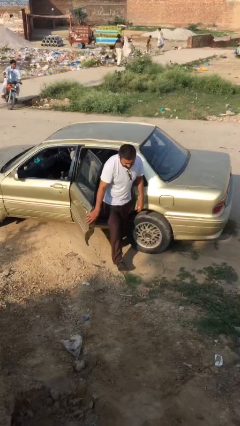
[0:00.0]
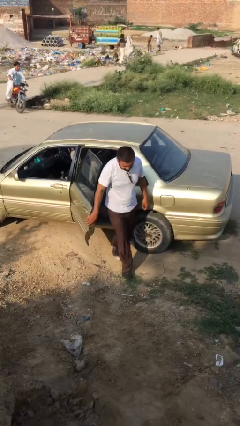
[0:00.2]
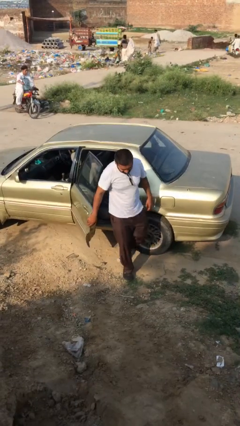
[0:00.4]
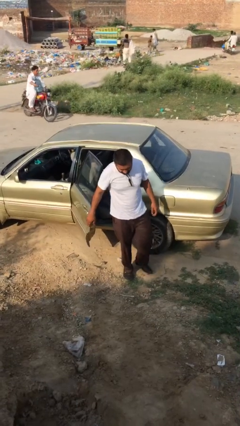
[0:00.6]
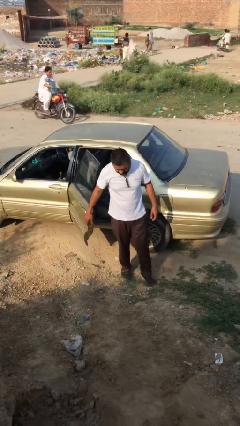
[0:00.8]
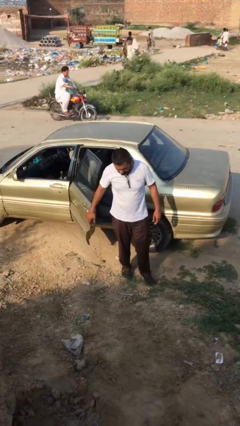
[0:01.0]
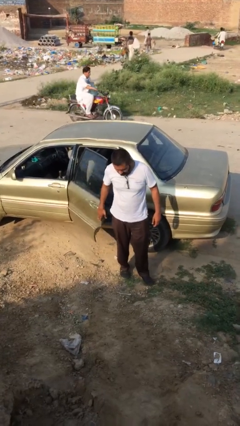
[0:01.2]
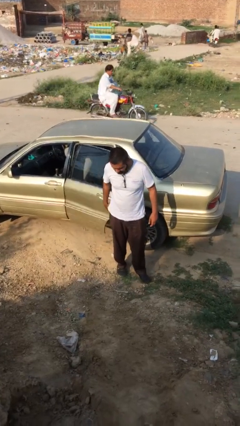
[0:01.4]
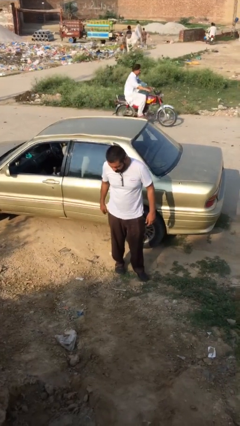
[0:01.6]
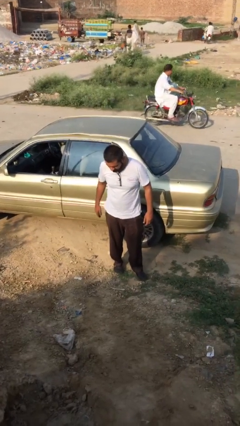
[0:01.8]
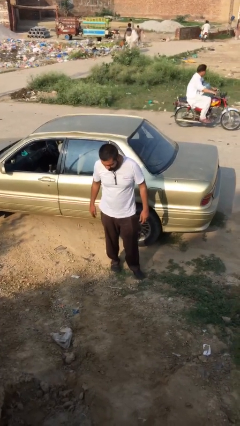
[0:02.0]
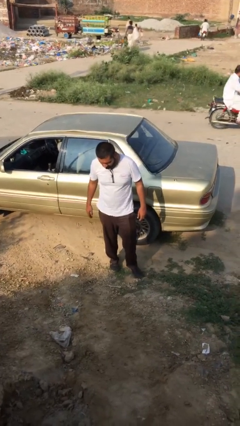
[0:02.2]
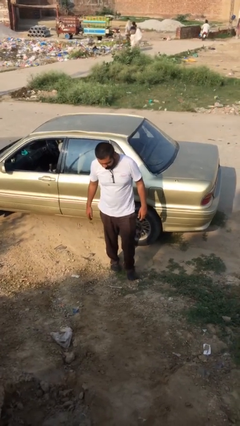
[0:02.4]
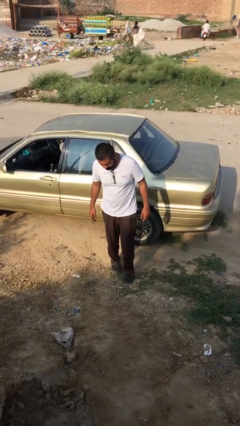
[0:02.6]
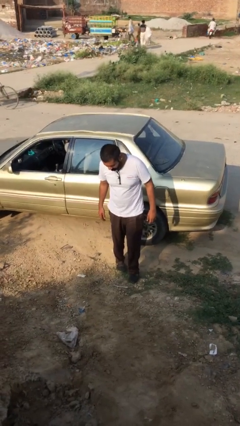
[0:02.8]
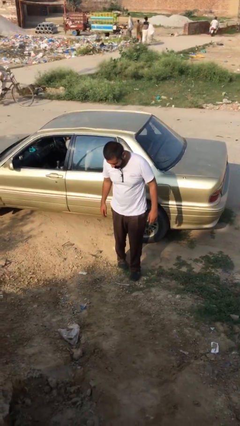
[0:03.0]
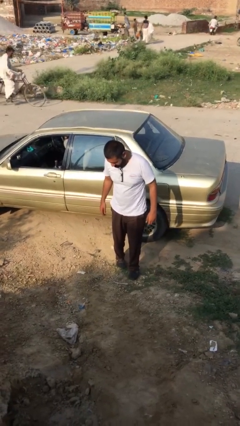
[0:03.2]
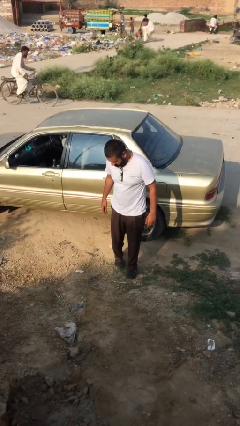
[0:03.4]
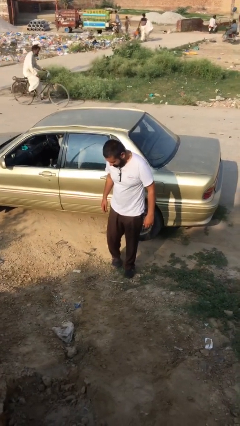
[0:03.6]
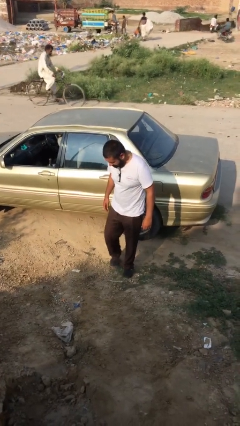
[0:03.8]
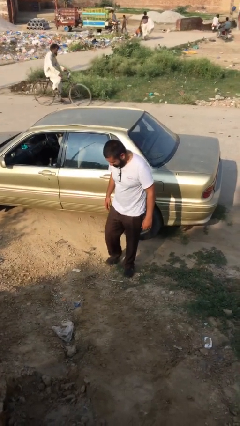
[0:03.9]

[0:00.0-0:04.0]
person closes car door

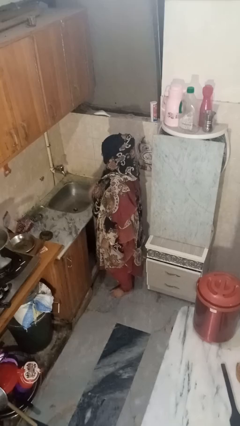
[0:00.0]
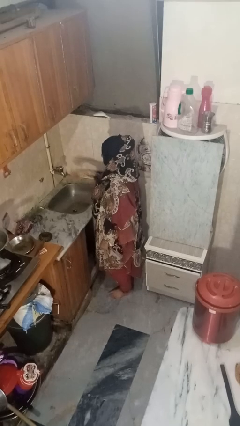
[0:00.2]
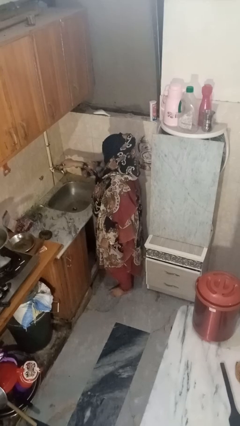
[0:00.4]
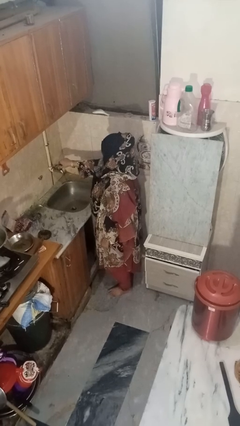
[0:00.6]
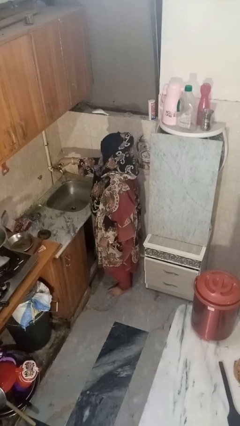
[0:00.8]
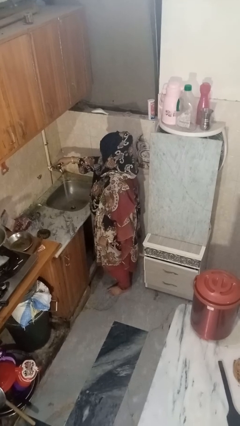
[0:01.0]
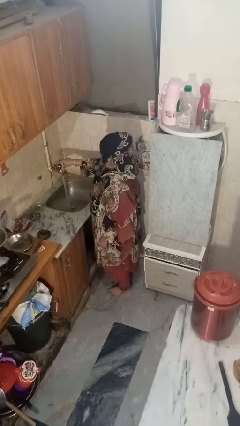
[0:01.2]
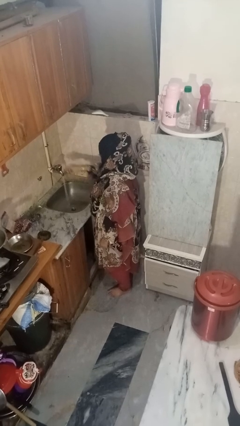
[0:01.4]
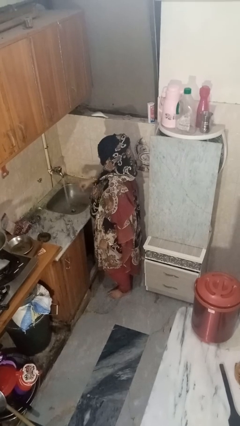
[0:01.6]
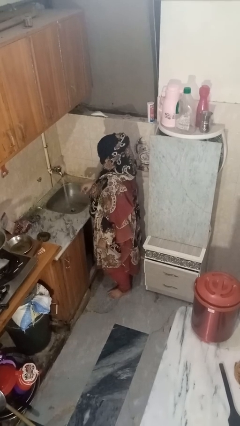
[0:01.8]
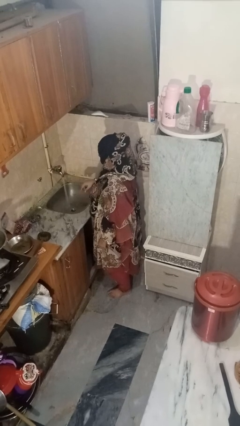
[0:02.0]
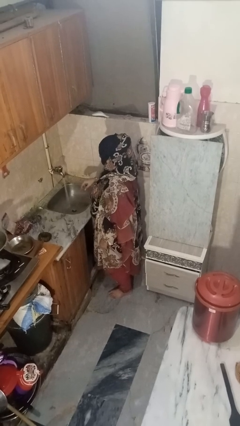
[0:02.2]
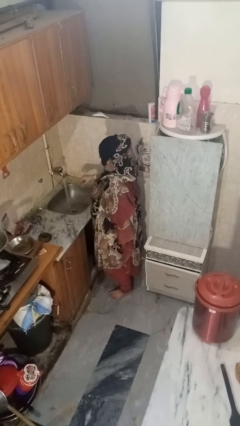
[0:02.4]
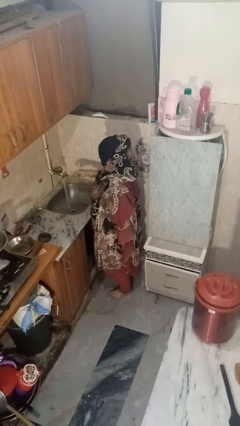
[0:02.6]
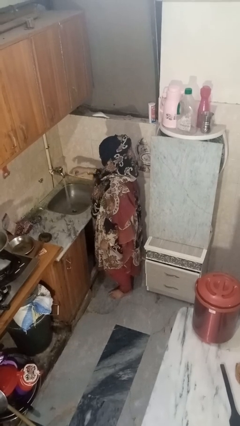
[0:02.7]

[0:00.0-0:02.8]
person turns on faucet

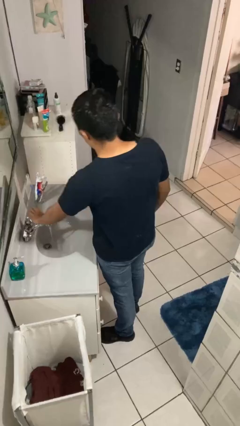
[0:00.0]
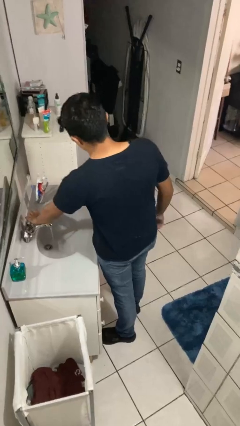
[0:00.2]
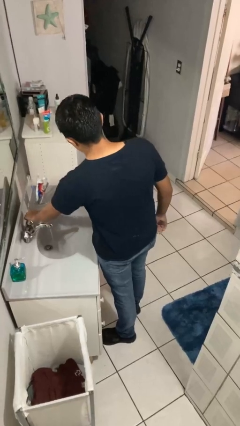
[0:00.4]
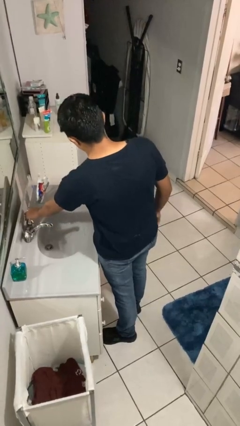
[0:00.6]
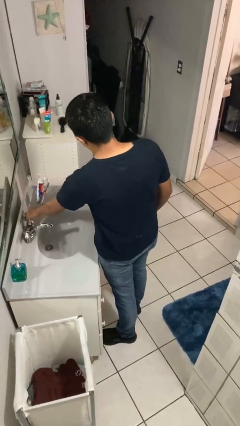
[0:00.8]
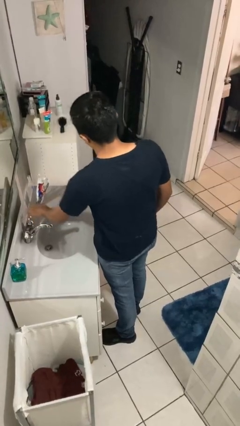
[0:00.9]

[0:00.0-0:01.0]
person turns off faucet

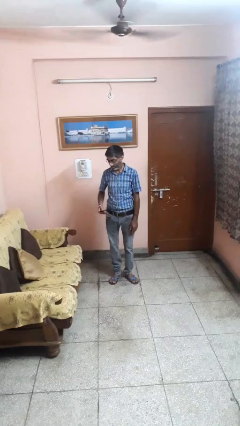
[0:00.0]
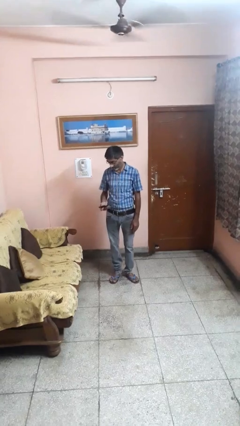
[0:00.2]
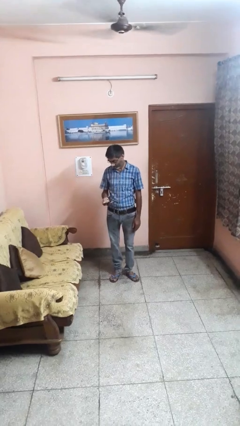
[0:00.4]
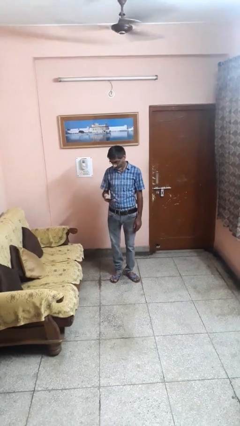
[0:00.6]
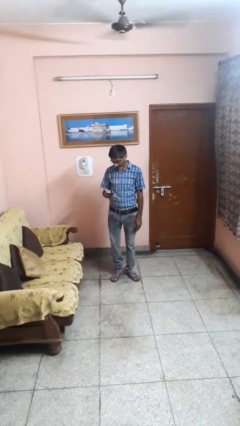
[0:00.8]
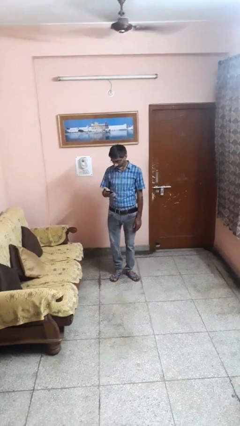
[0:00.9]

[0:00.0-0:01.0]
person takes phone from pocket

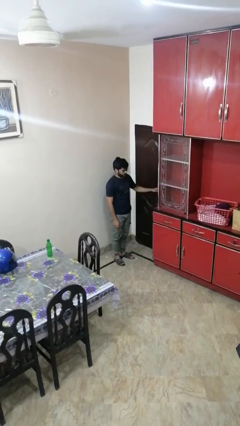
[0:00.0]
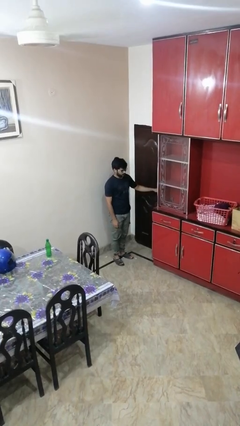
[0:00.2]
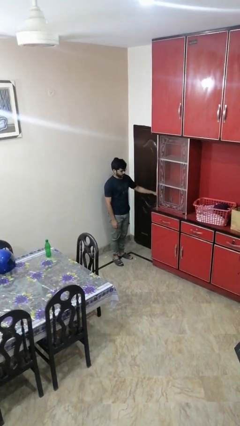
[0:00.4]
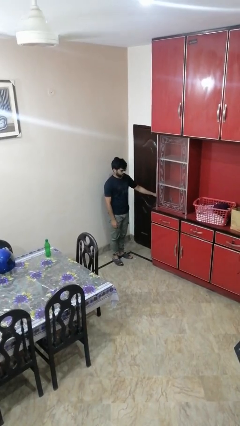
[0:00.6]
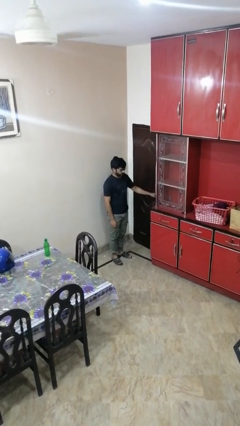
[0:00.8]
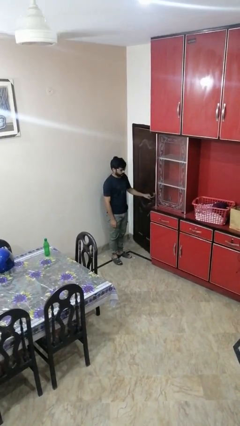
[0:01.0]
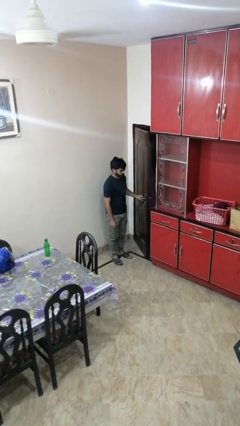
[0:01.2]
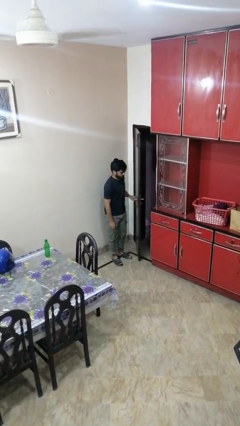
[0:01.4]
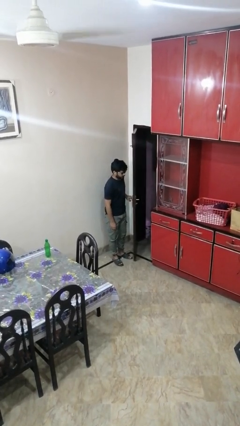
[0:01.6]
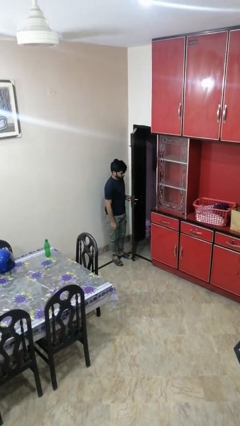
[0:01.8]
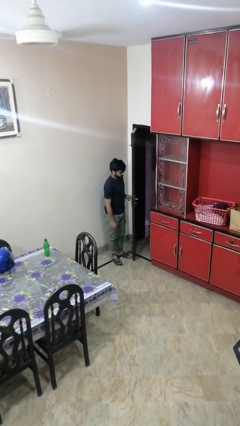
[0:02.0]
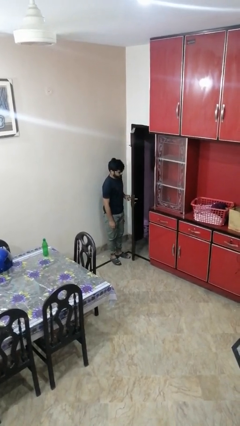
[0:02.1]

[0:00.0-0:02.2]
person opens facility door

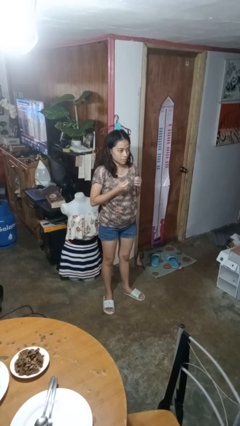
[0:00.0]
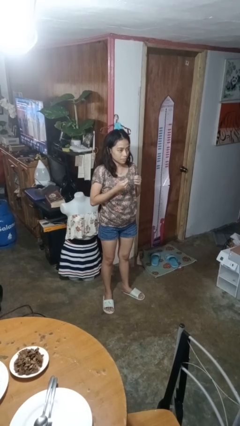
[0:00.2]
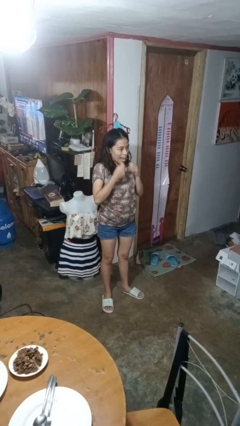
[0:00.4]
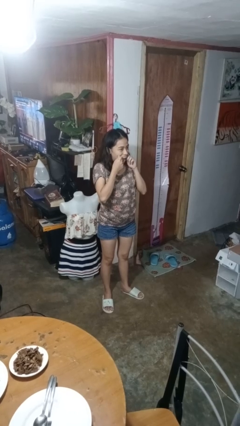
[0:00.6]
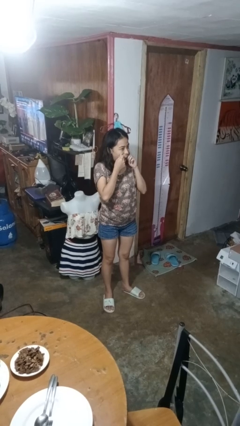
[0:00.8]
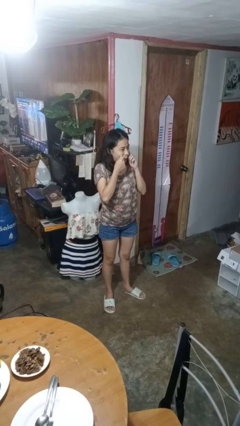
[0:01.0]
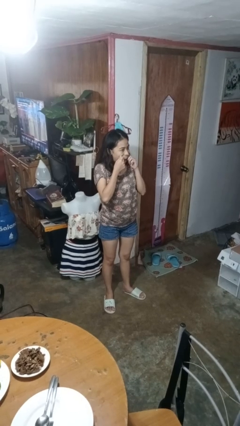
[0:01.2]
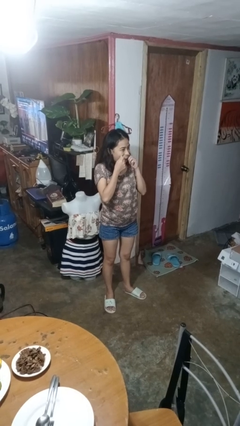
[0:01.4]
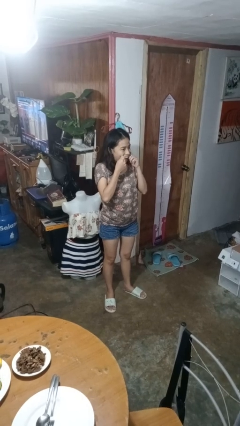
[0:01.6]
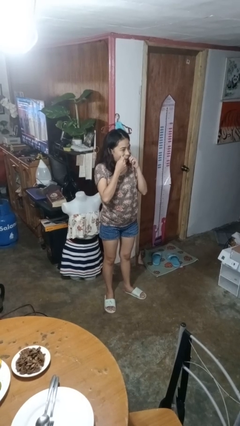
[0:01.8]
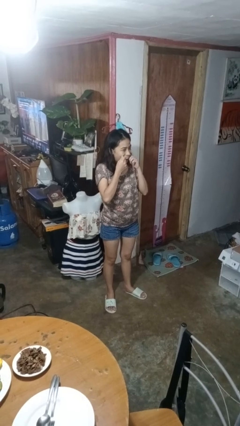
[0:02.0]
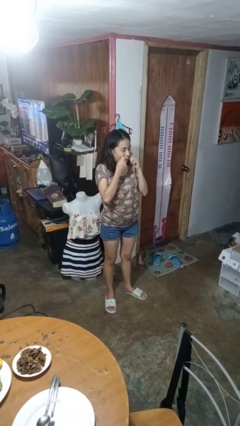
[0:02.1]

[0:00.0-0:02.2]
person flosses

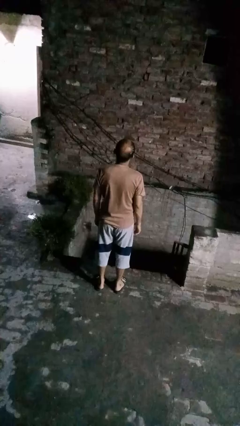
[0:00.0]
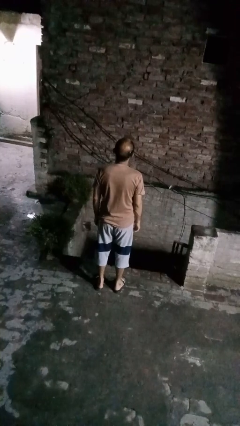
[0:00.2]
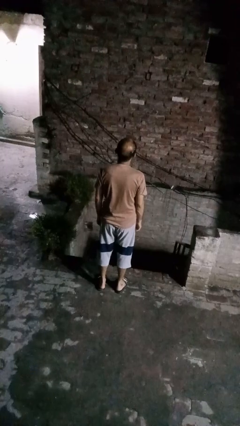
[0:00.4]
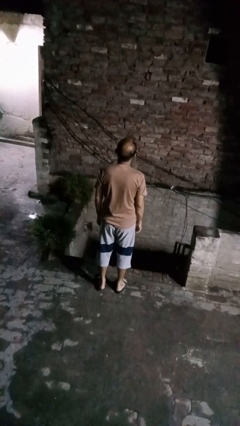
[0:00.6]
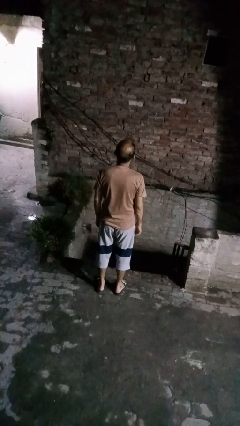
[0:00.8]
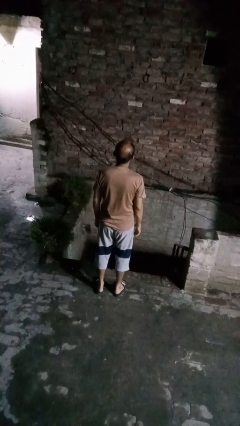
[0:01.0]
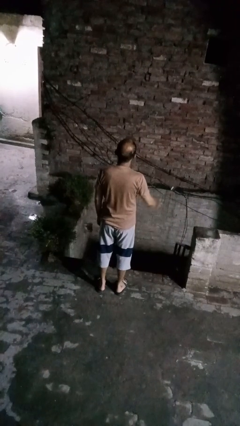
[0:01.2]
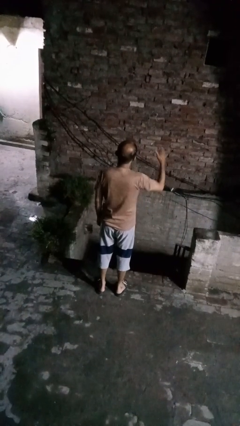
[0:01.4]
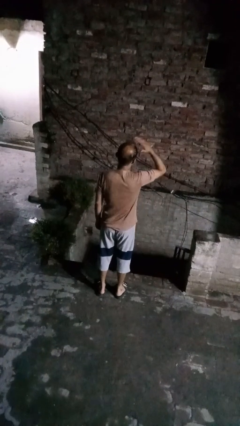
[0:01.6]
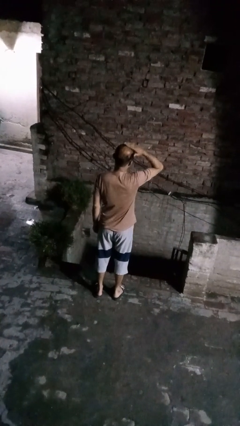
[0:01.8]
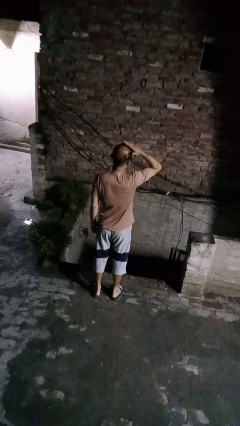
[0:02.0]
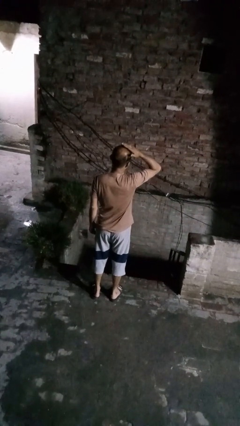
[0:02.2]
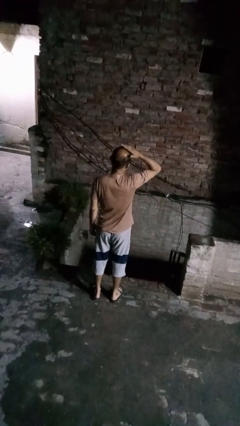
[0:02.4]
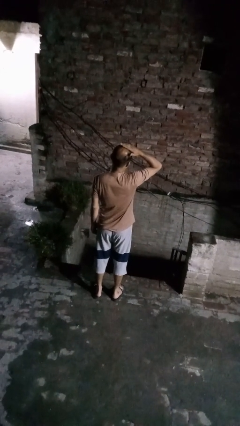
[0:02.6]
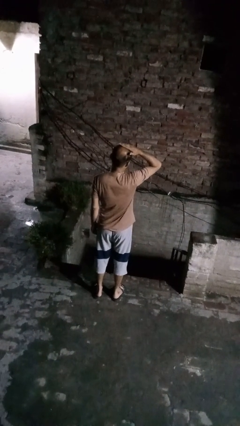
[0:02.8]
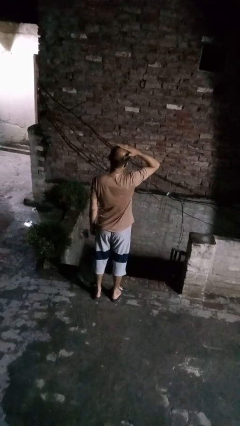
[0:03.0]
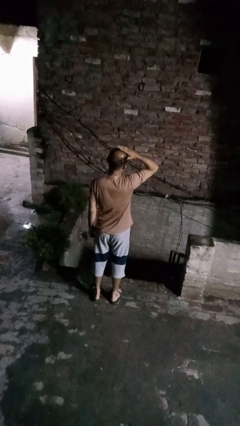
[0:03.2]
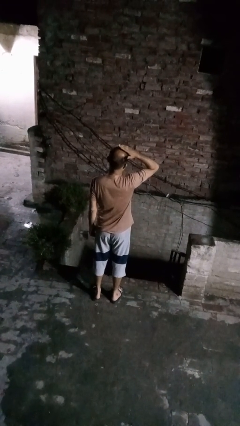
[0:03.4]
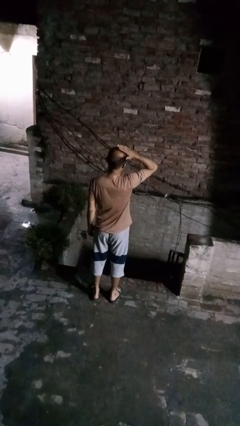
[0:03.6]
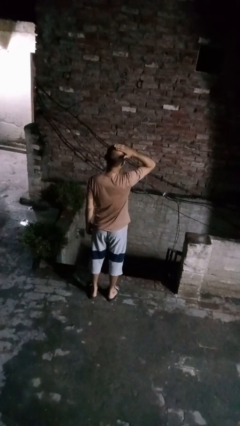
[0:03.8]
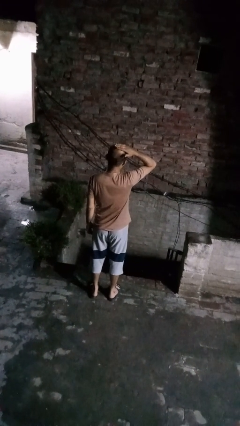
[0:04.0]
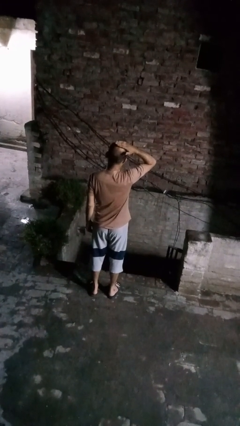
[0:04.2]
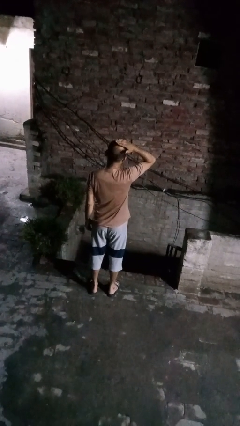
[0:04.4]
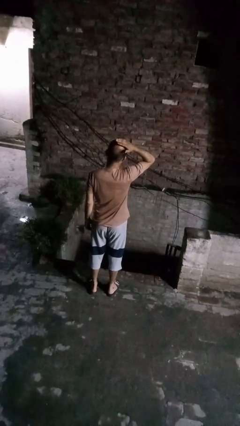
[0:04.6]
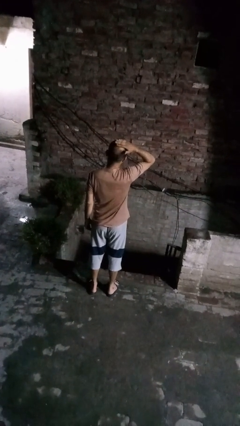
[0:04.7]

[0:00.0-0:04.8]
person pats head
